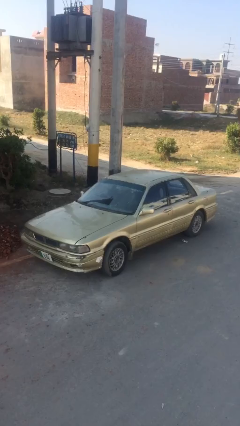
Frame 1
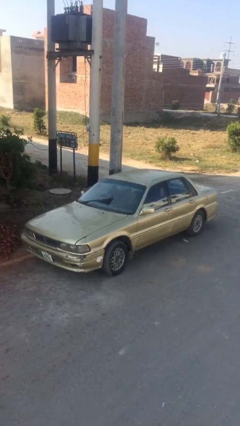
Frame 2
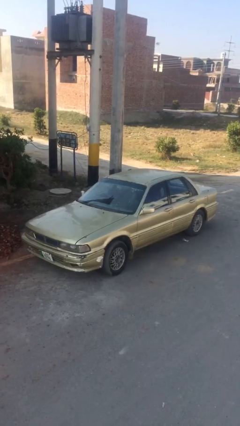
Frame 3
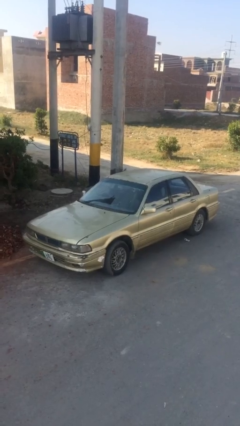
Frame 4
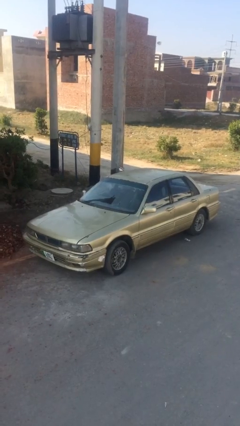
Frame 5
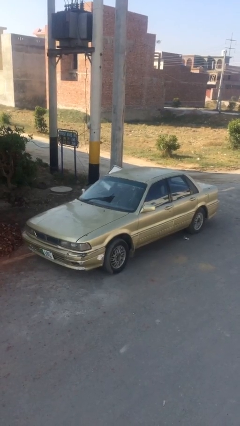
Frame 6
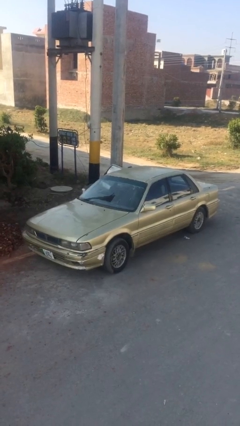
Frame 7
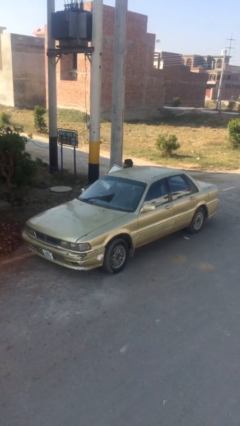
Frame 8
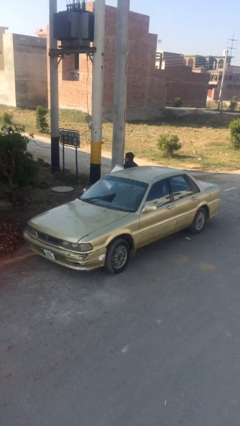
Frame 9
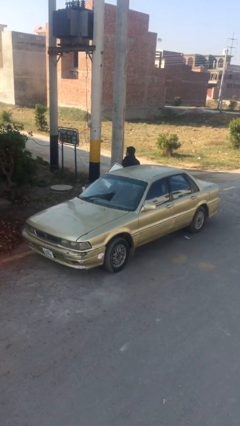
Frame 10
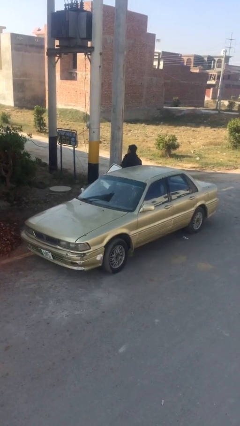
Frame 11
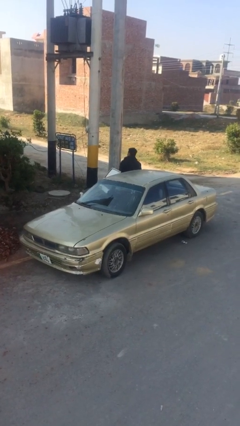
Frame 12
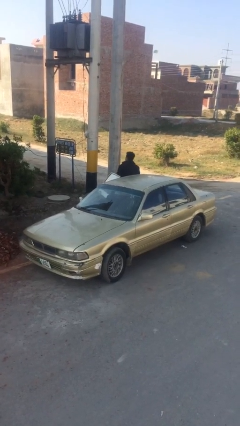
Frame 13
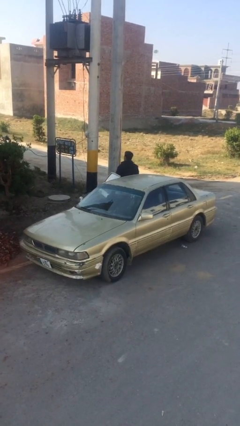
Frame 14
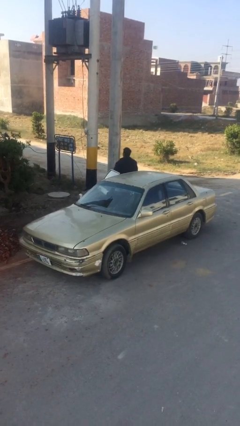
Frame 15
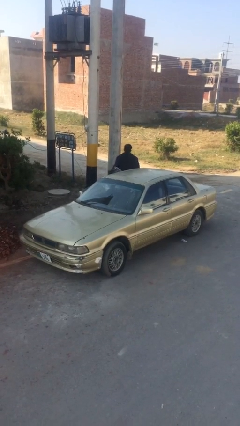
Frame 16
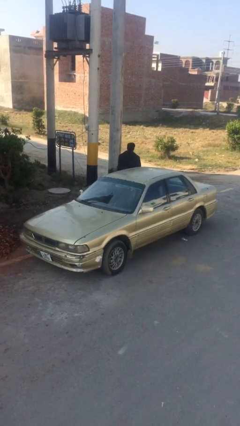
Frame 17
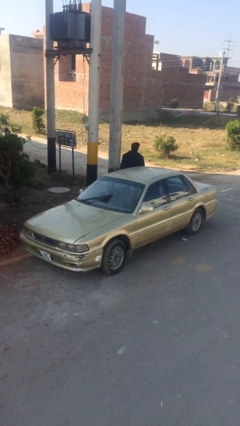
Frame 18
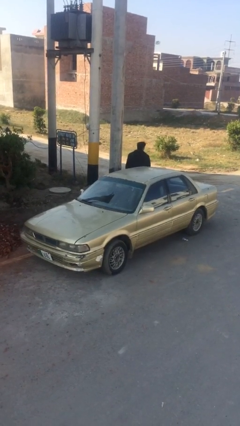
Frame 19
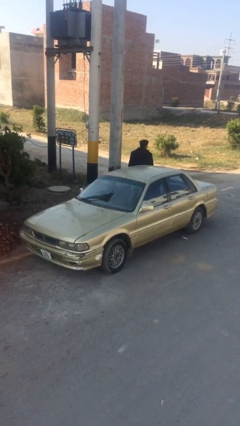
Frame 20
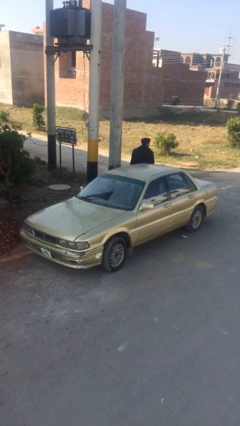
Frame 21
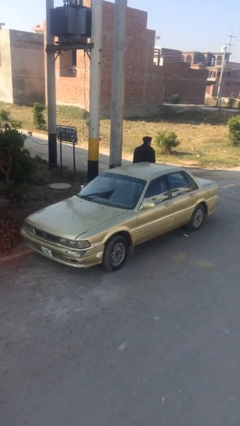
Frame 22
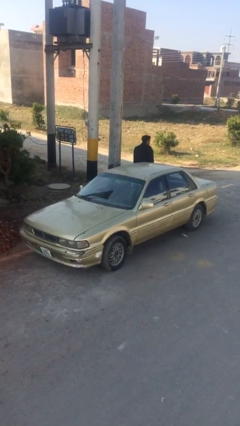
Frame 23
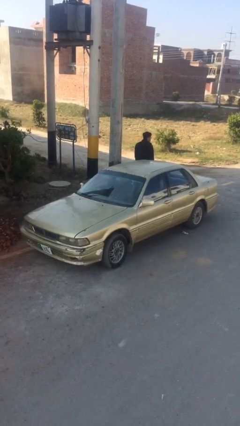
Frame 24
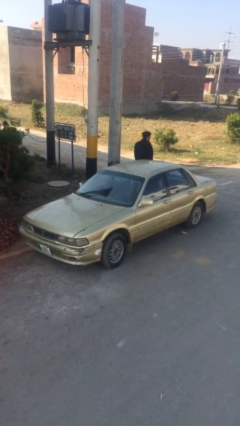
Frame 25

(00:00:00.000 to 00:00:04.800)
car drops off person

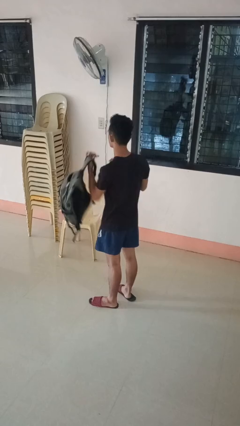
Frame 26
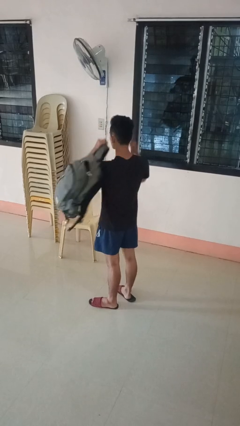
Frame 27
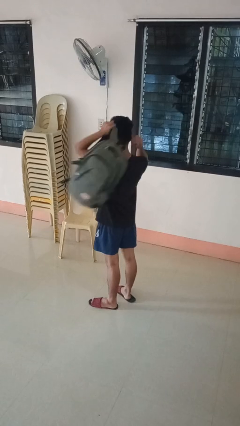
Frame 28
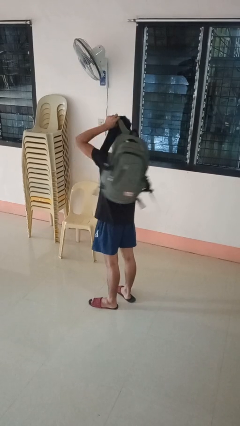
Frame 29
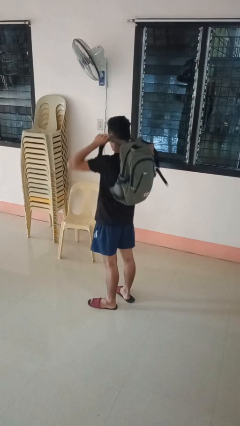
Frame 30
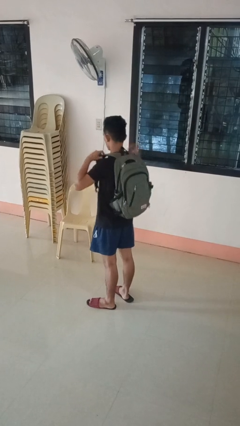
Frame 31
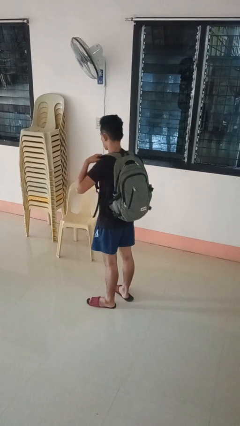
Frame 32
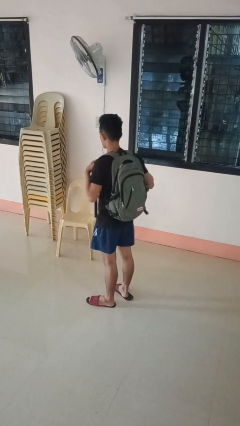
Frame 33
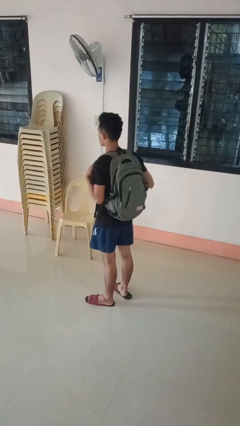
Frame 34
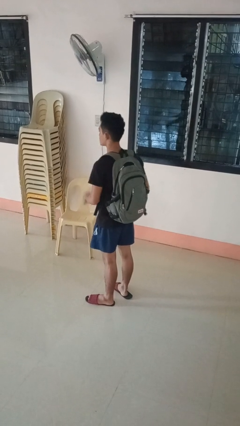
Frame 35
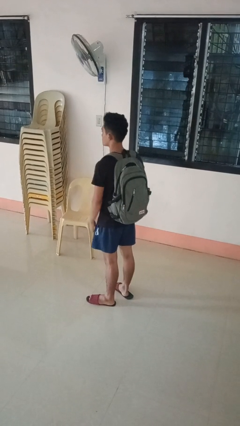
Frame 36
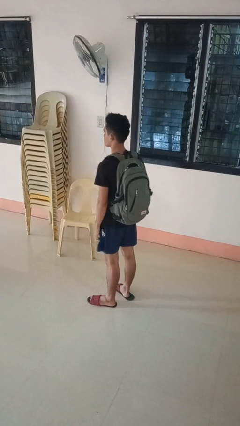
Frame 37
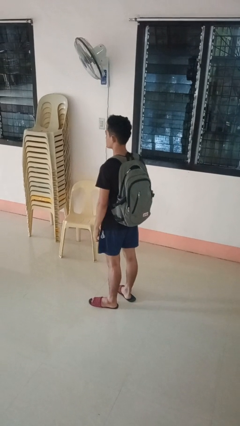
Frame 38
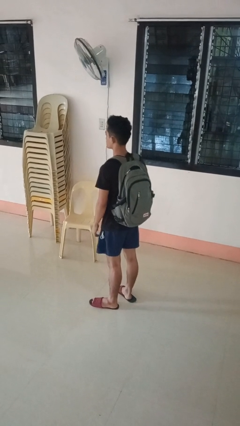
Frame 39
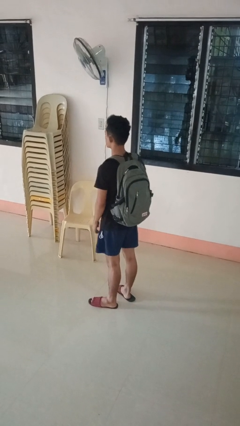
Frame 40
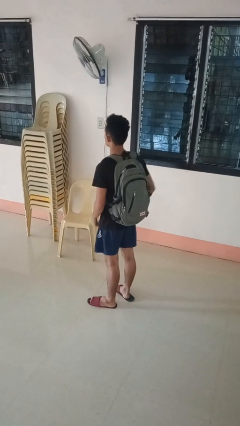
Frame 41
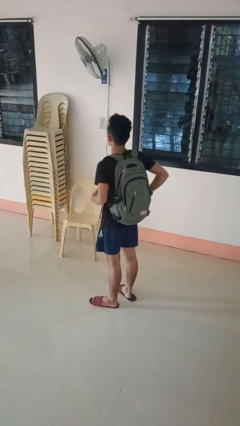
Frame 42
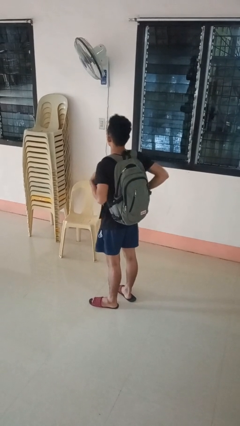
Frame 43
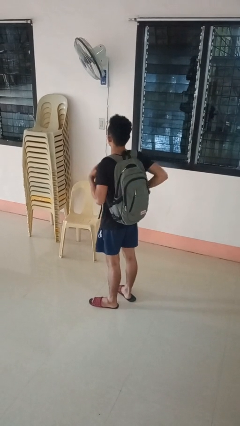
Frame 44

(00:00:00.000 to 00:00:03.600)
person puts on backpack

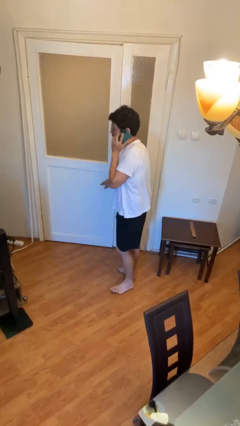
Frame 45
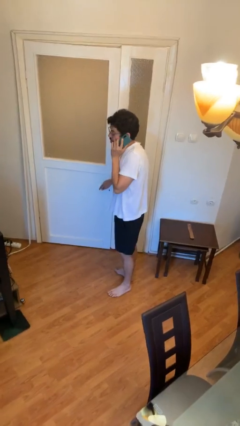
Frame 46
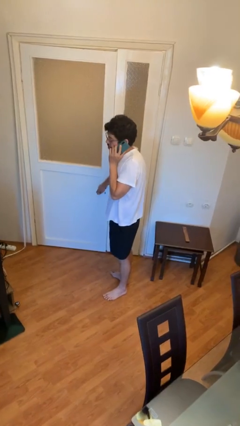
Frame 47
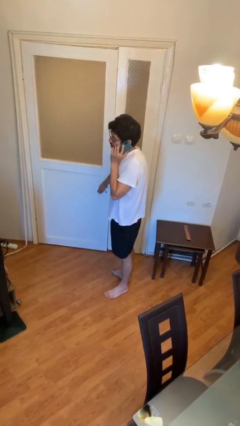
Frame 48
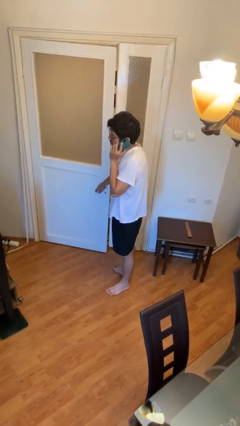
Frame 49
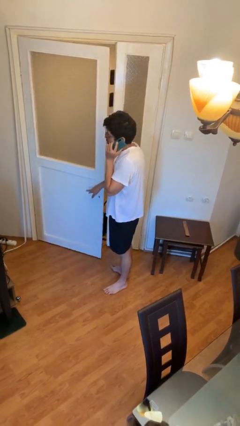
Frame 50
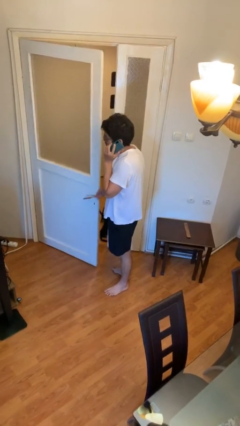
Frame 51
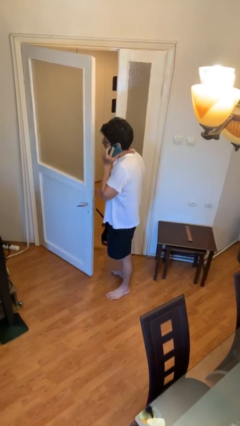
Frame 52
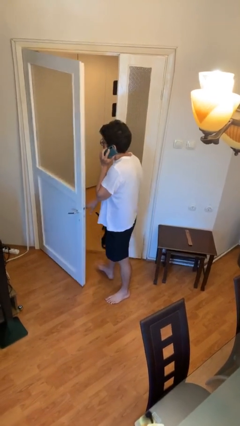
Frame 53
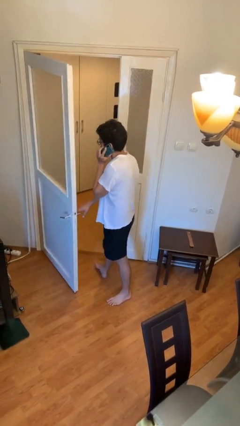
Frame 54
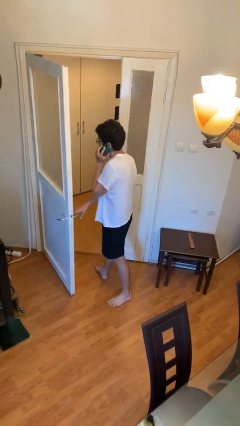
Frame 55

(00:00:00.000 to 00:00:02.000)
person opens facility door

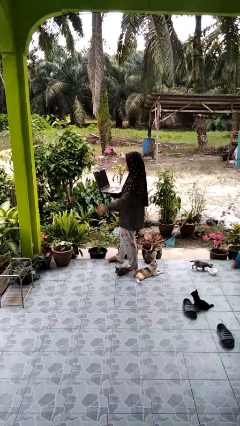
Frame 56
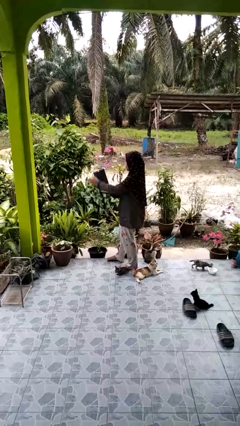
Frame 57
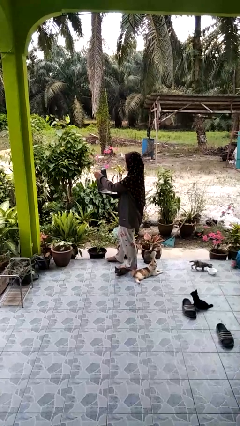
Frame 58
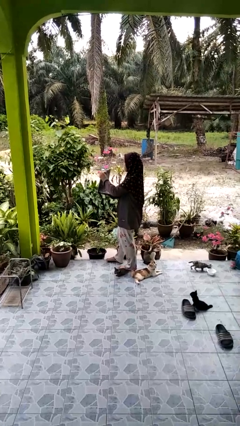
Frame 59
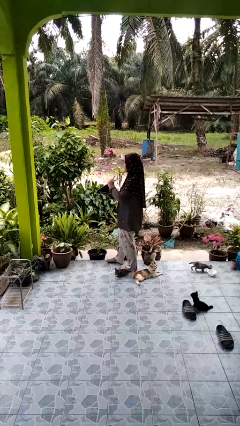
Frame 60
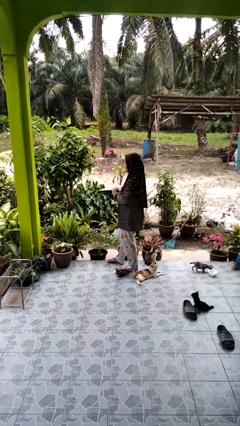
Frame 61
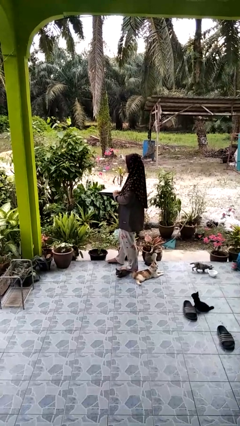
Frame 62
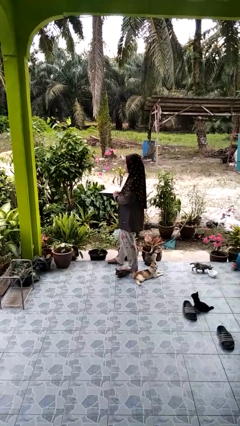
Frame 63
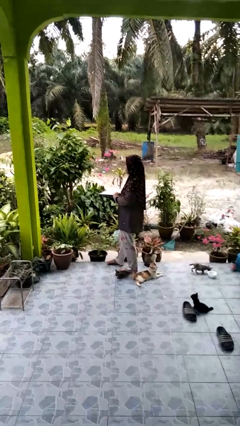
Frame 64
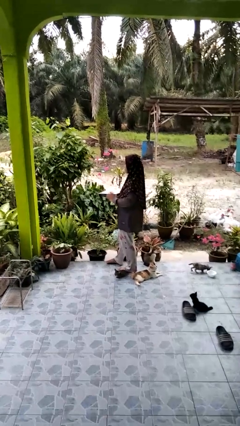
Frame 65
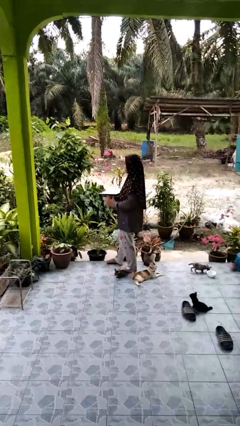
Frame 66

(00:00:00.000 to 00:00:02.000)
person closes laptop

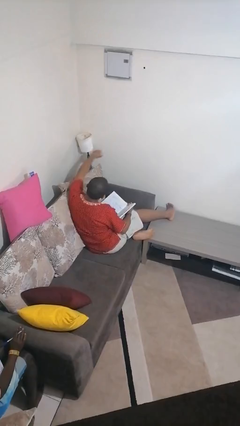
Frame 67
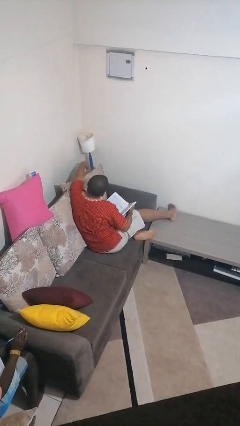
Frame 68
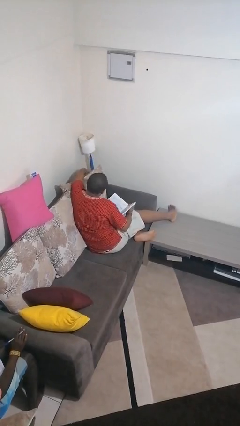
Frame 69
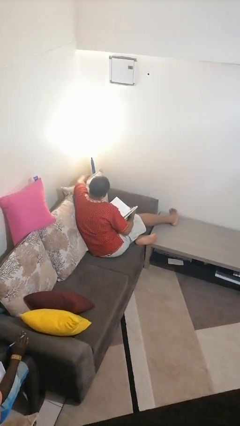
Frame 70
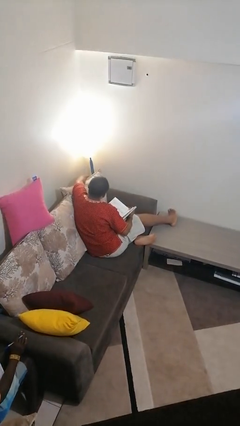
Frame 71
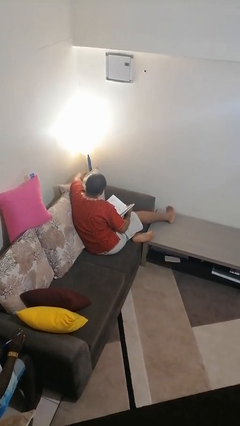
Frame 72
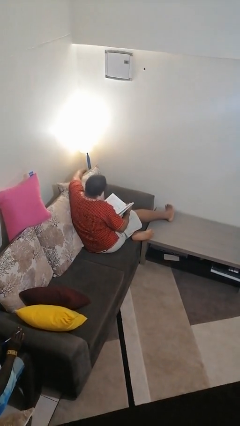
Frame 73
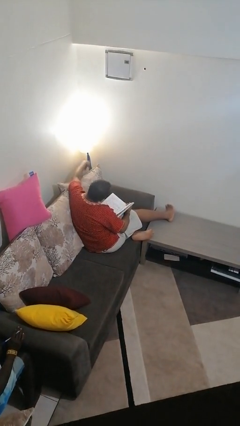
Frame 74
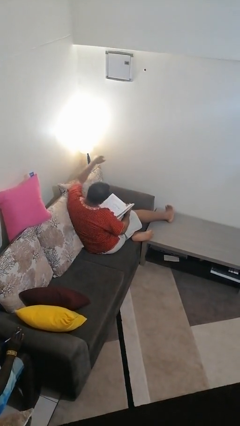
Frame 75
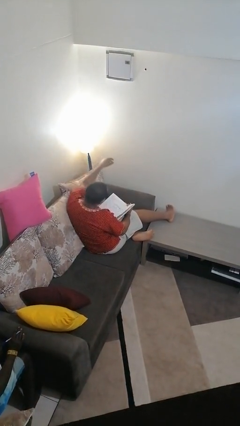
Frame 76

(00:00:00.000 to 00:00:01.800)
person turns on lamp

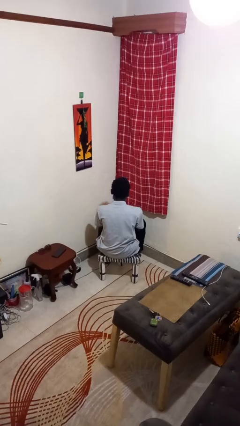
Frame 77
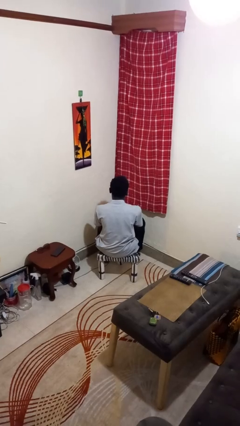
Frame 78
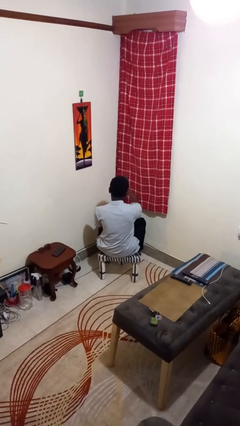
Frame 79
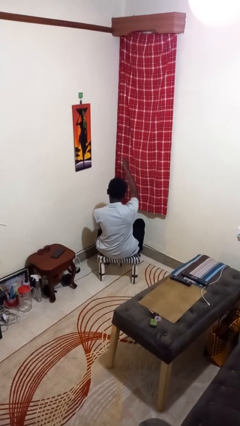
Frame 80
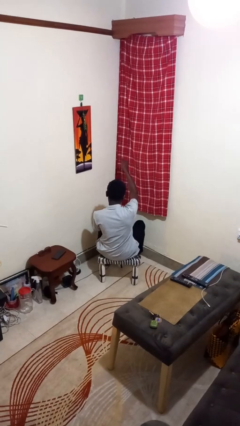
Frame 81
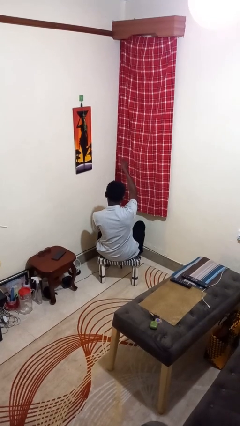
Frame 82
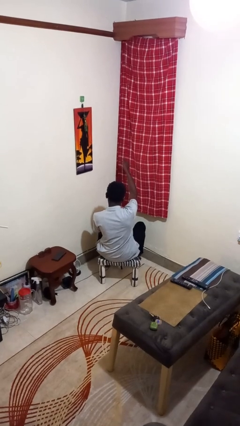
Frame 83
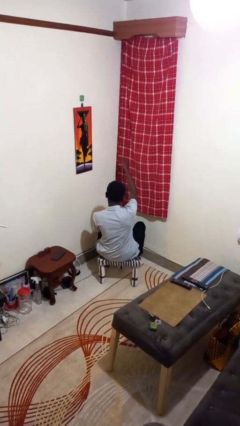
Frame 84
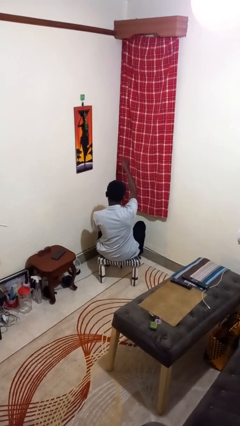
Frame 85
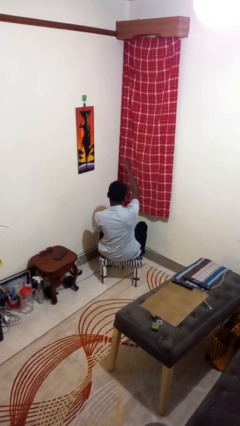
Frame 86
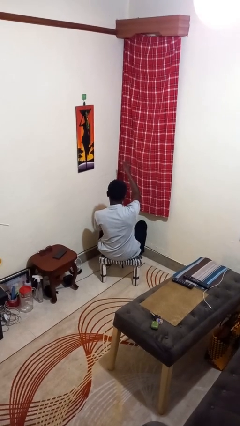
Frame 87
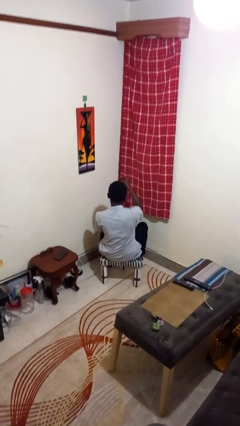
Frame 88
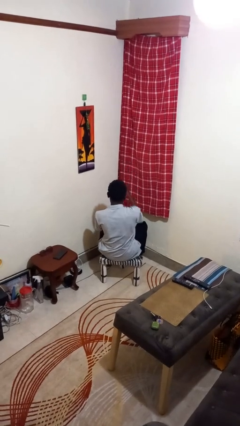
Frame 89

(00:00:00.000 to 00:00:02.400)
person gestures thumbs up

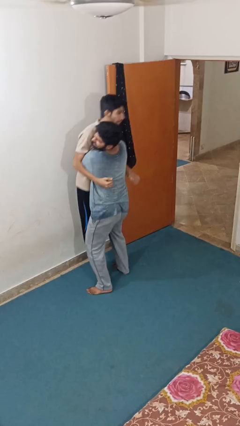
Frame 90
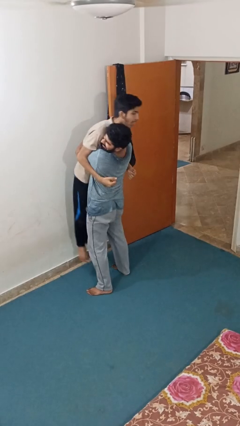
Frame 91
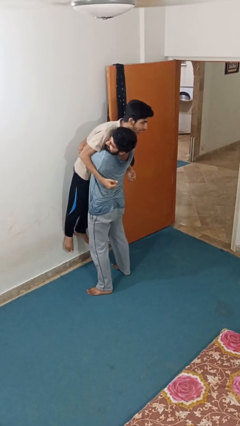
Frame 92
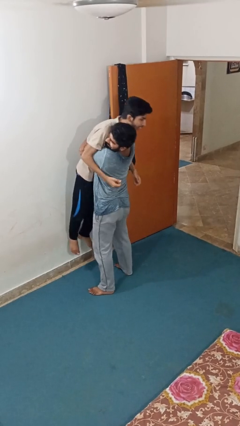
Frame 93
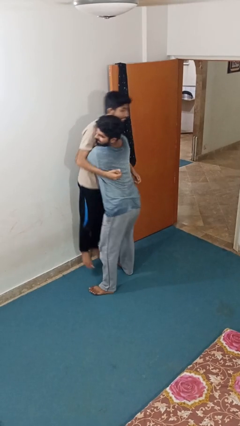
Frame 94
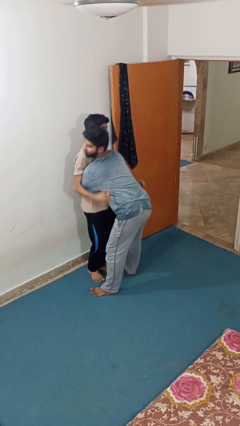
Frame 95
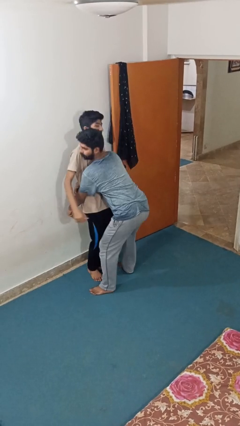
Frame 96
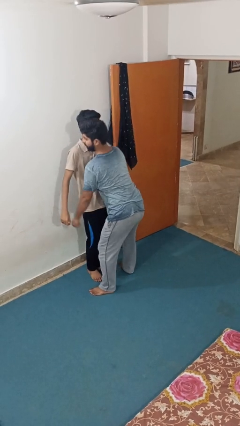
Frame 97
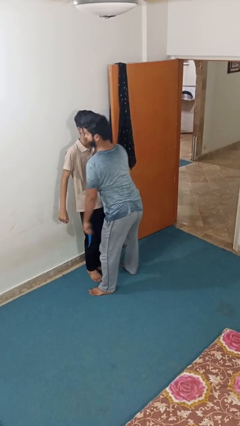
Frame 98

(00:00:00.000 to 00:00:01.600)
person puts down person
